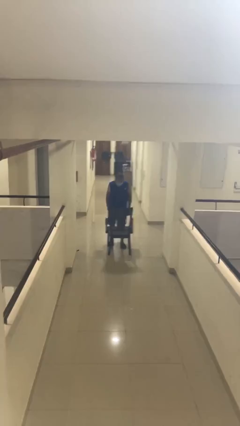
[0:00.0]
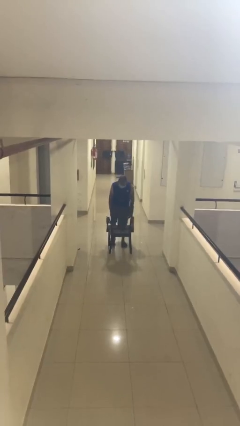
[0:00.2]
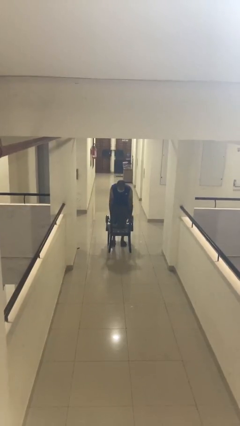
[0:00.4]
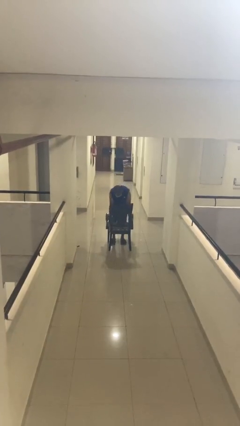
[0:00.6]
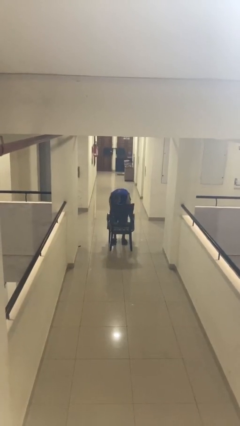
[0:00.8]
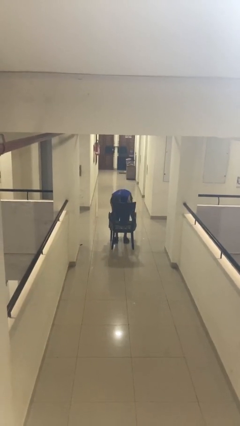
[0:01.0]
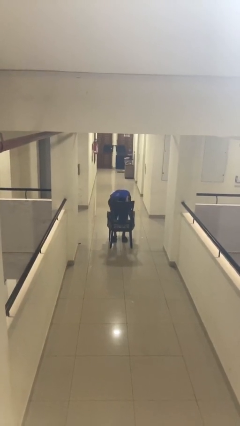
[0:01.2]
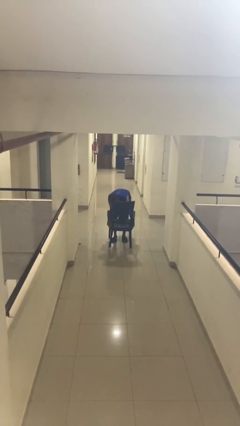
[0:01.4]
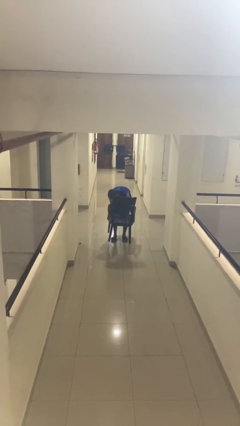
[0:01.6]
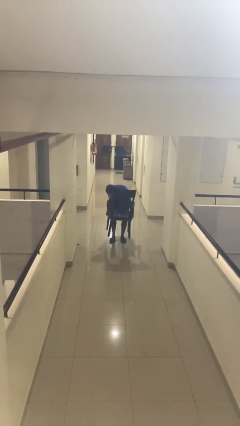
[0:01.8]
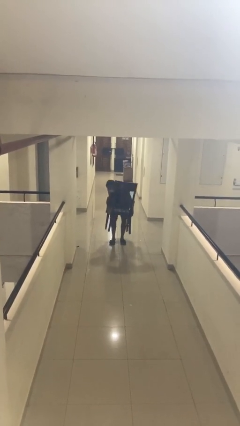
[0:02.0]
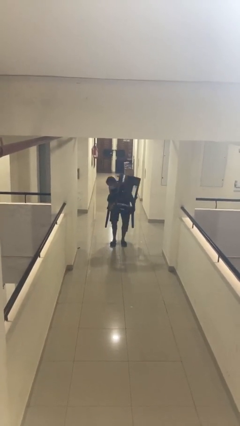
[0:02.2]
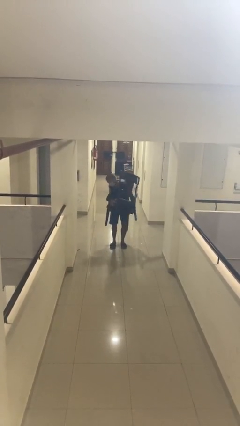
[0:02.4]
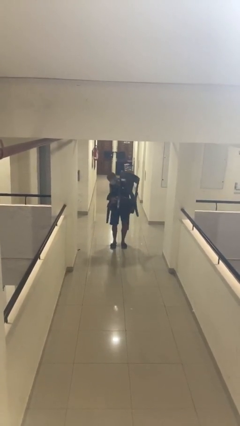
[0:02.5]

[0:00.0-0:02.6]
person picks up object from floor

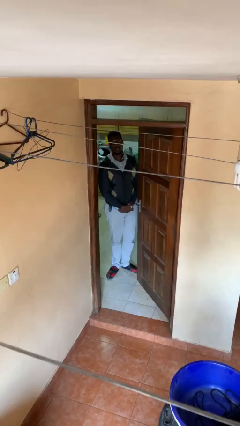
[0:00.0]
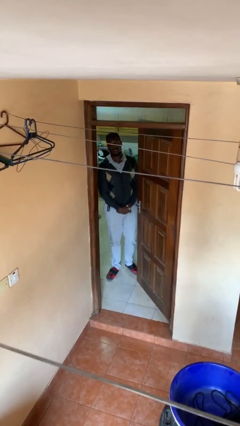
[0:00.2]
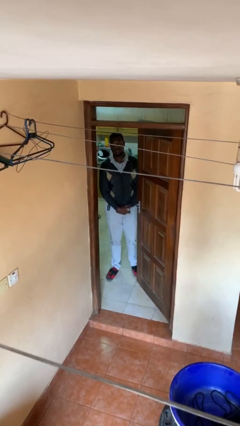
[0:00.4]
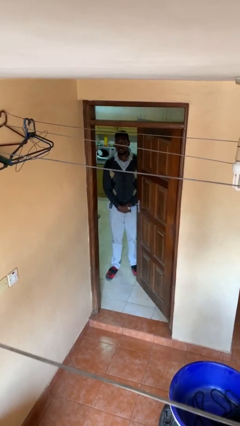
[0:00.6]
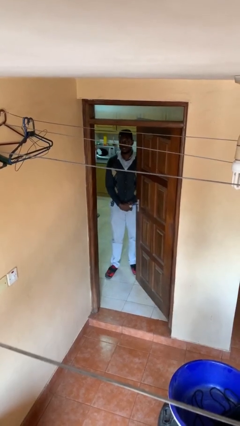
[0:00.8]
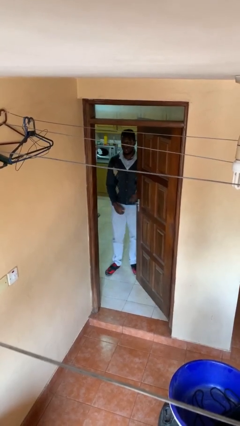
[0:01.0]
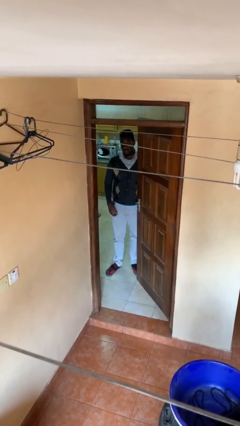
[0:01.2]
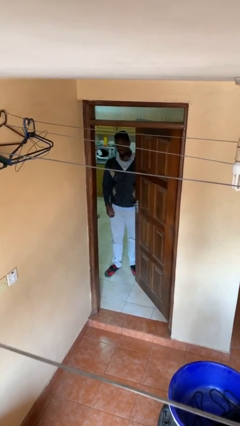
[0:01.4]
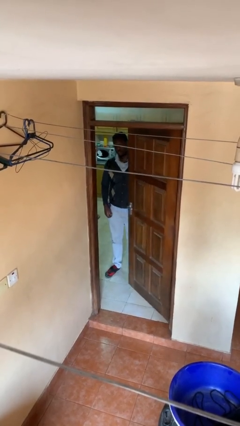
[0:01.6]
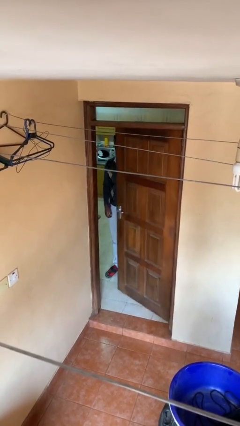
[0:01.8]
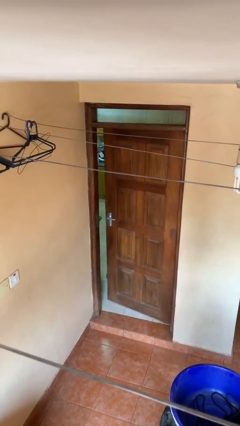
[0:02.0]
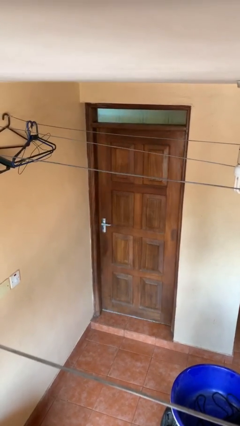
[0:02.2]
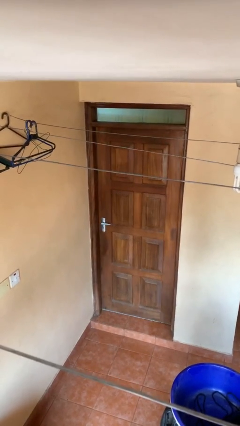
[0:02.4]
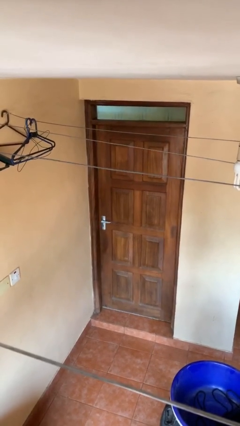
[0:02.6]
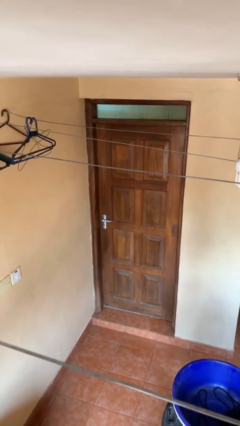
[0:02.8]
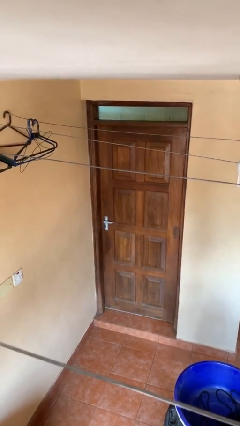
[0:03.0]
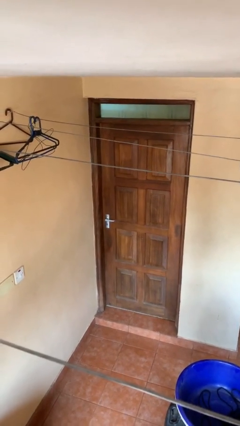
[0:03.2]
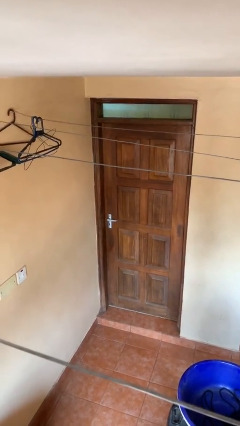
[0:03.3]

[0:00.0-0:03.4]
person closes facility door

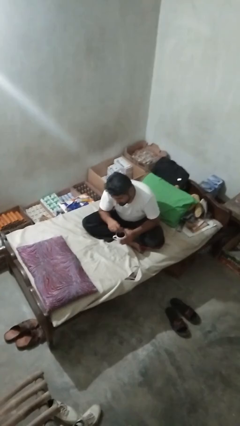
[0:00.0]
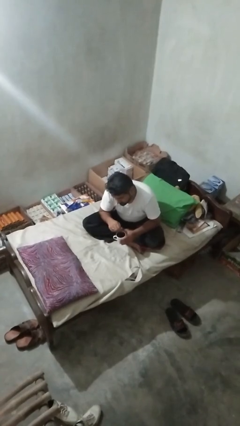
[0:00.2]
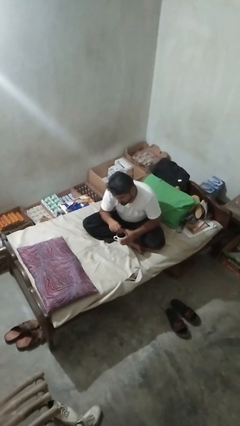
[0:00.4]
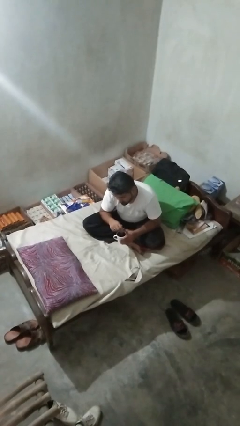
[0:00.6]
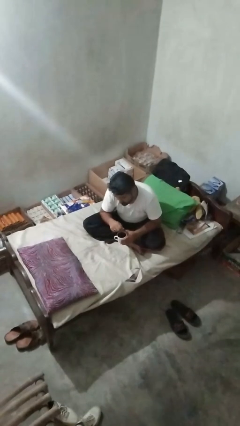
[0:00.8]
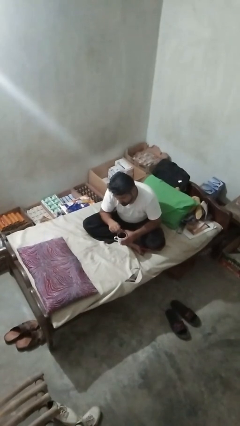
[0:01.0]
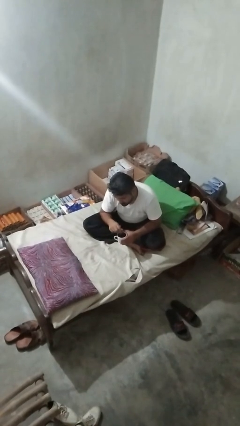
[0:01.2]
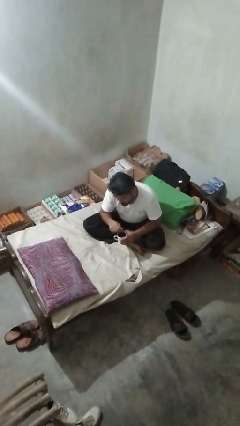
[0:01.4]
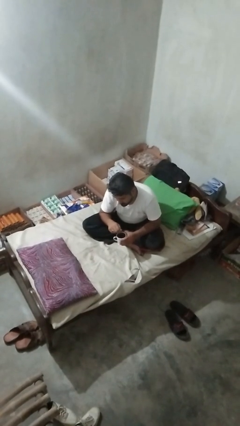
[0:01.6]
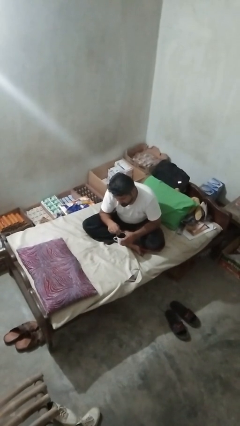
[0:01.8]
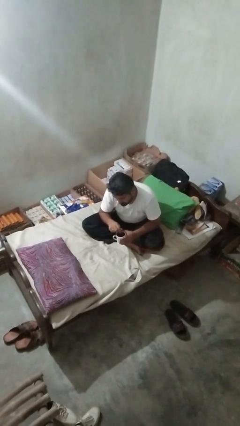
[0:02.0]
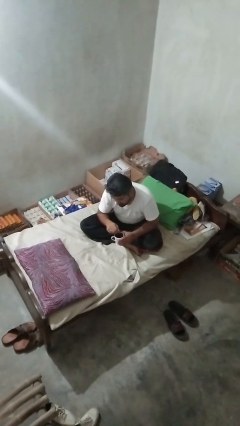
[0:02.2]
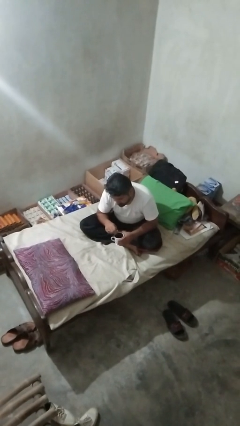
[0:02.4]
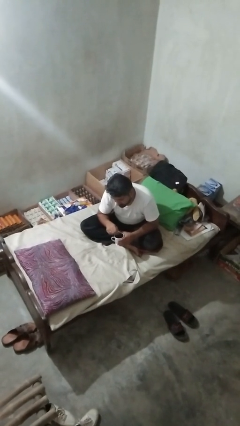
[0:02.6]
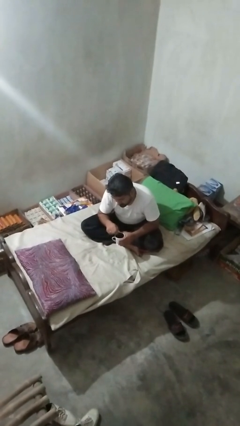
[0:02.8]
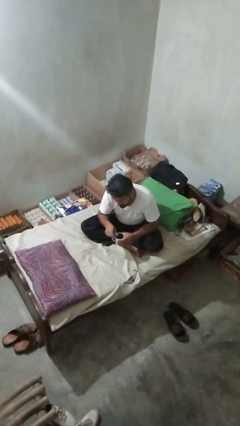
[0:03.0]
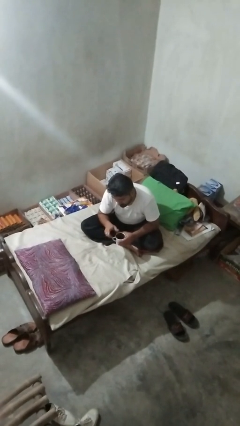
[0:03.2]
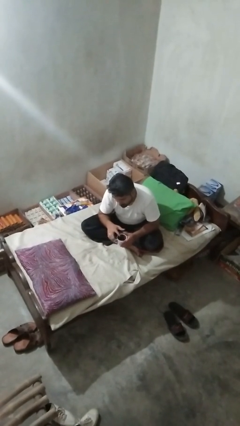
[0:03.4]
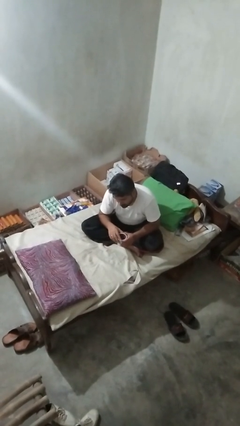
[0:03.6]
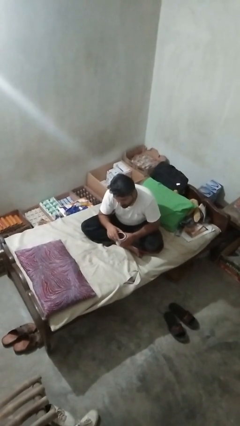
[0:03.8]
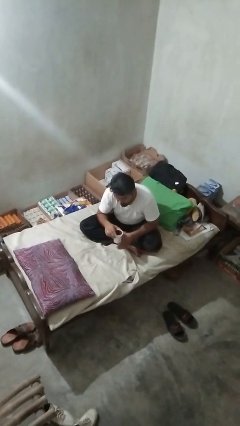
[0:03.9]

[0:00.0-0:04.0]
person stirs mug

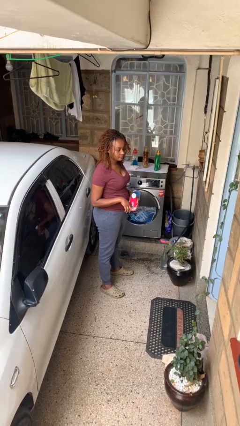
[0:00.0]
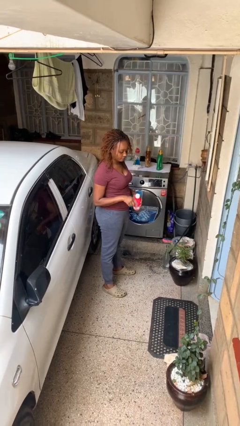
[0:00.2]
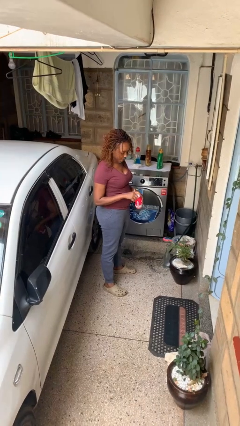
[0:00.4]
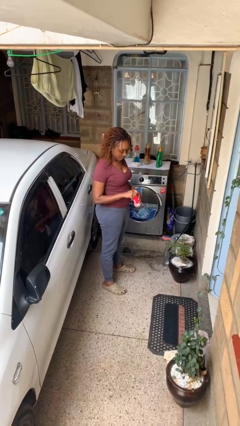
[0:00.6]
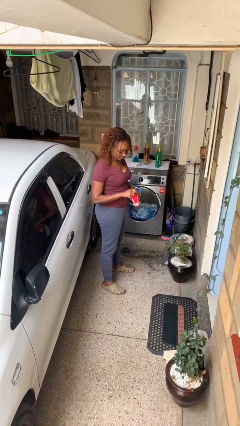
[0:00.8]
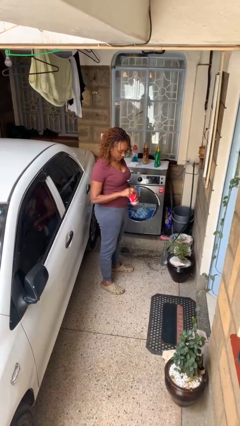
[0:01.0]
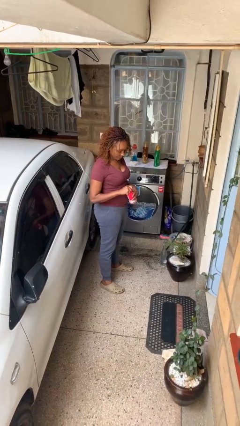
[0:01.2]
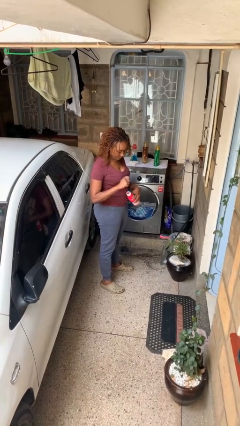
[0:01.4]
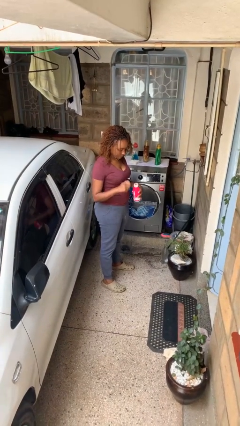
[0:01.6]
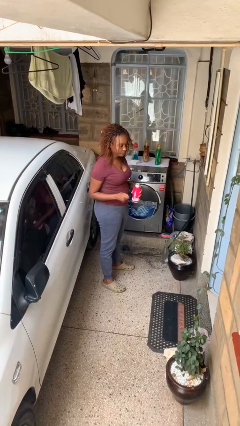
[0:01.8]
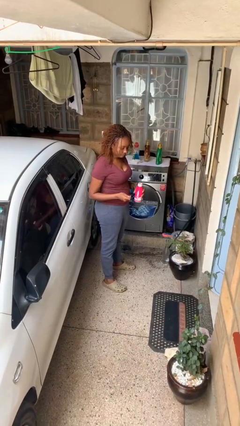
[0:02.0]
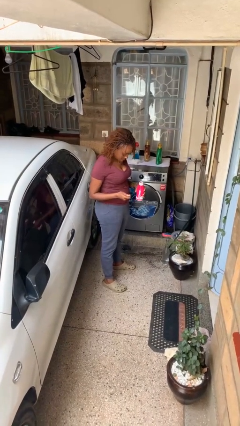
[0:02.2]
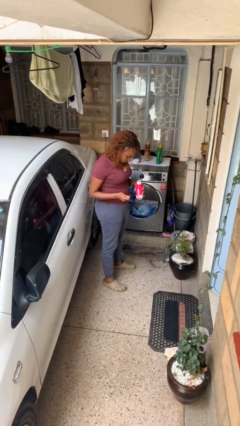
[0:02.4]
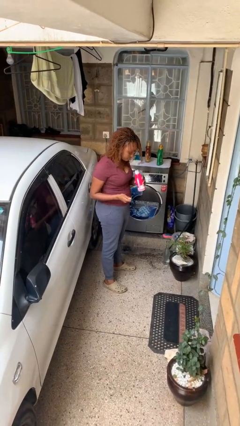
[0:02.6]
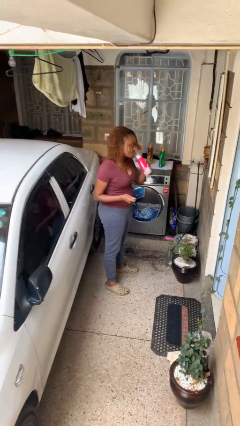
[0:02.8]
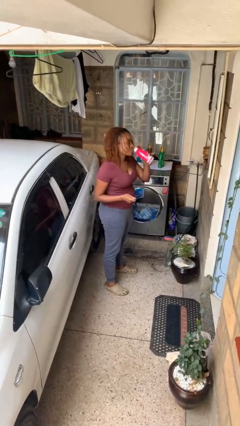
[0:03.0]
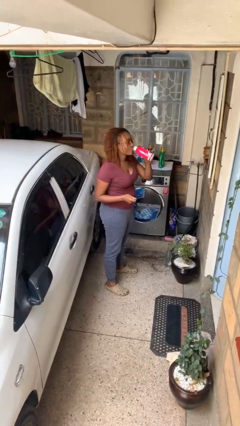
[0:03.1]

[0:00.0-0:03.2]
person opens beverage can

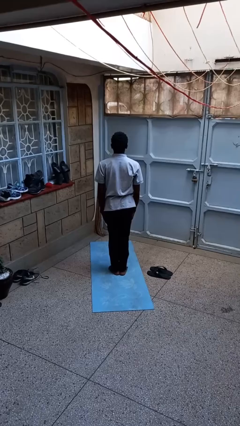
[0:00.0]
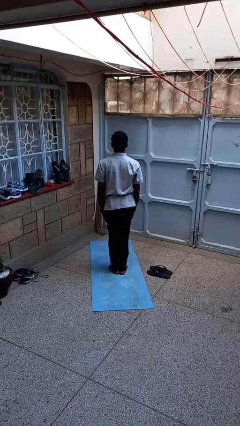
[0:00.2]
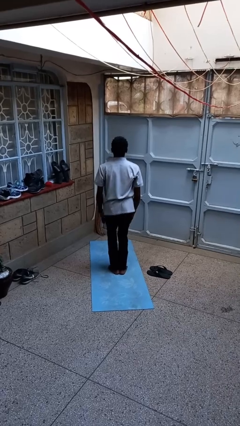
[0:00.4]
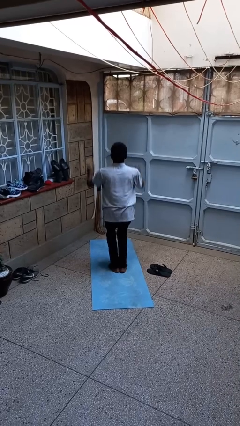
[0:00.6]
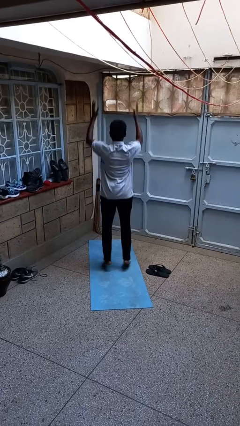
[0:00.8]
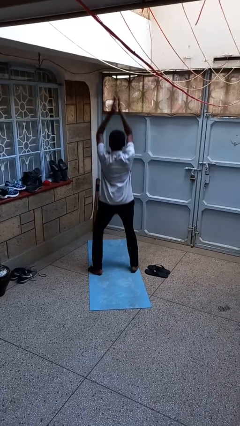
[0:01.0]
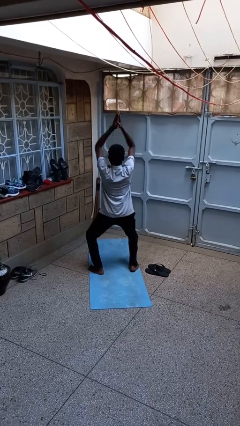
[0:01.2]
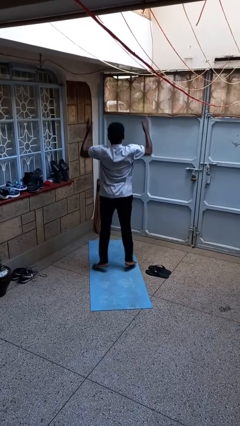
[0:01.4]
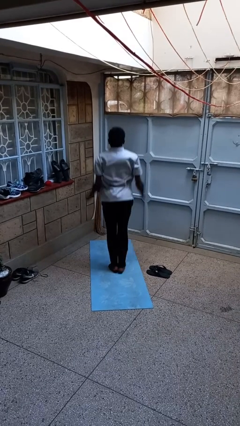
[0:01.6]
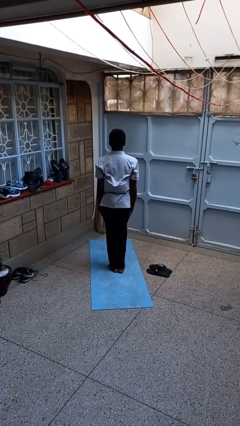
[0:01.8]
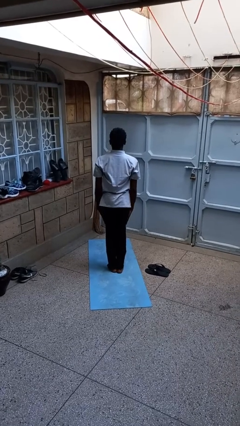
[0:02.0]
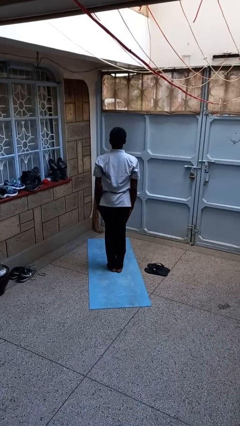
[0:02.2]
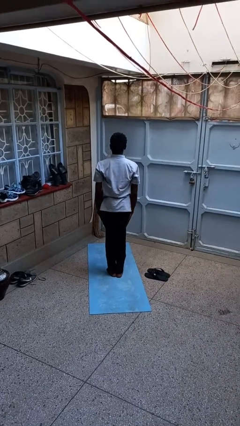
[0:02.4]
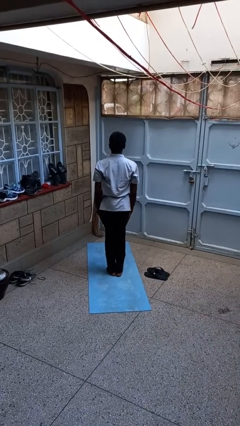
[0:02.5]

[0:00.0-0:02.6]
person exercises with jumping jacks

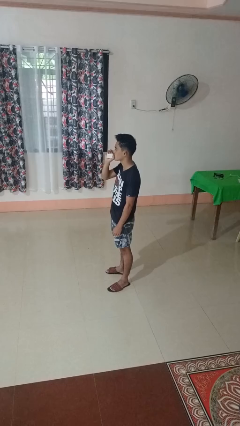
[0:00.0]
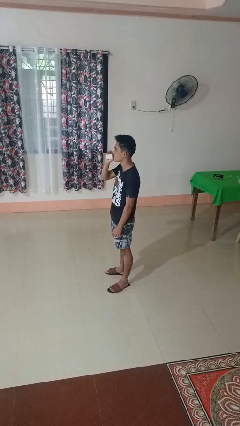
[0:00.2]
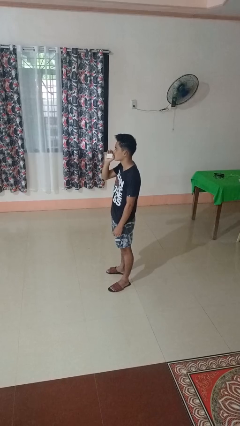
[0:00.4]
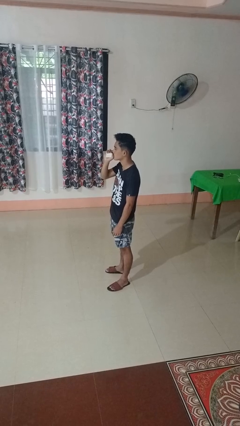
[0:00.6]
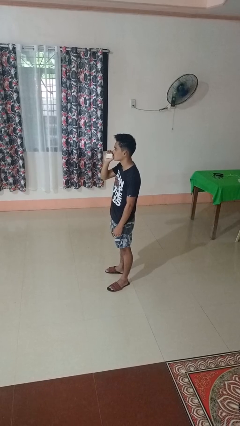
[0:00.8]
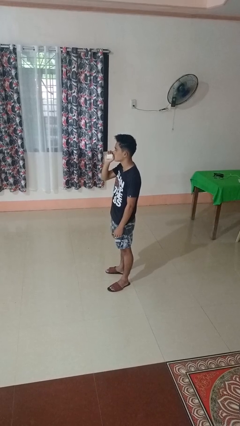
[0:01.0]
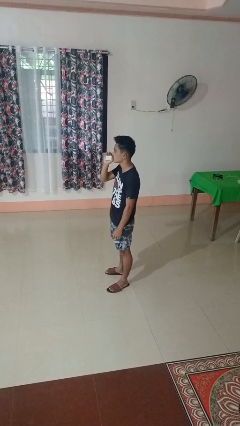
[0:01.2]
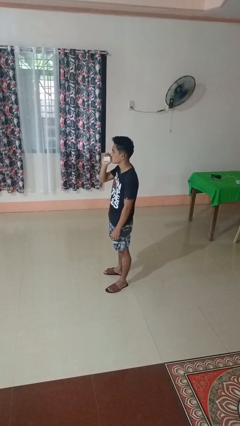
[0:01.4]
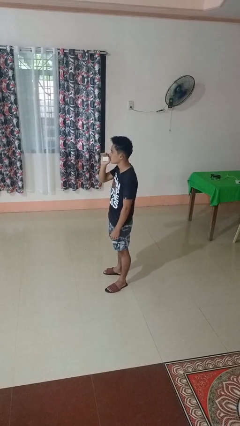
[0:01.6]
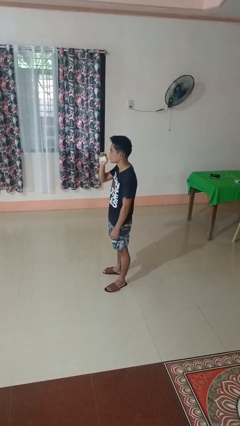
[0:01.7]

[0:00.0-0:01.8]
person vapes
